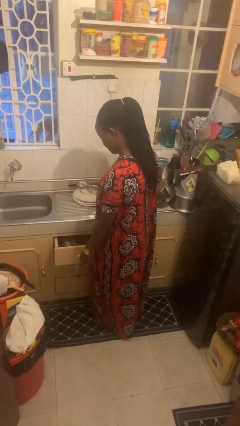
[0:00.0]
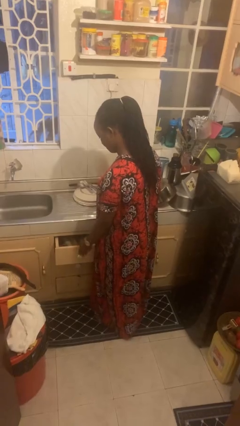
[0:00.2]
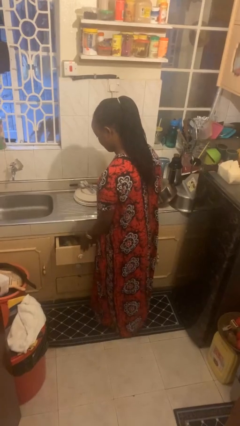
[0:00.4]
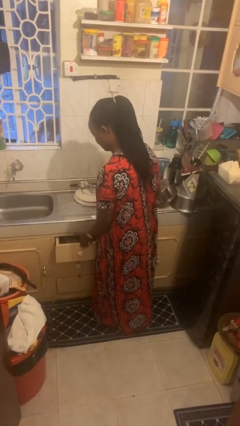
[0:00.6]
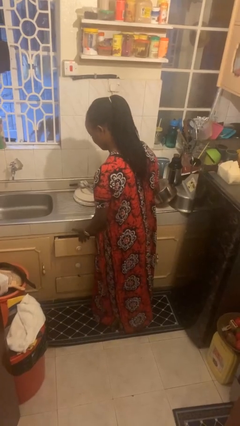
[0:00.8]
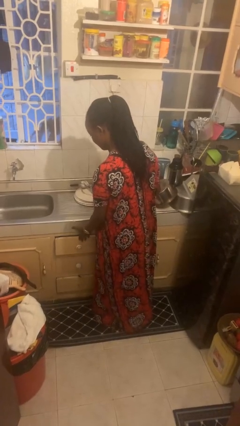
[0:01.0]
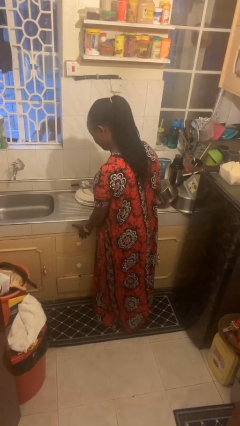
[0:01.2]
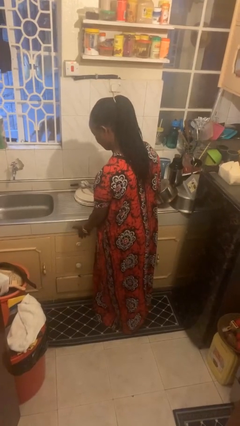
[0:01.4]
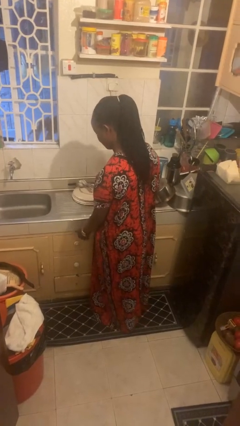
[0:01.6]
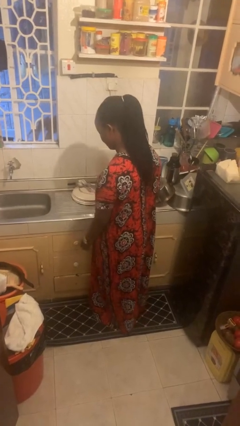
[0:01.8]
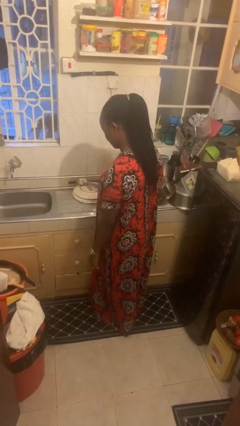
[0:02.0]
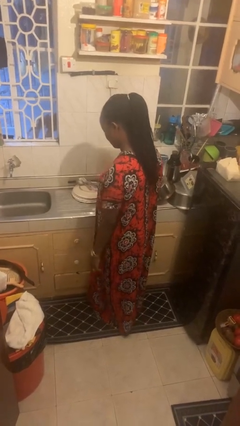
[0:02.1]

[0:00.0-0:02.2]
person closes kitchen drawer

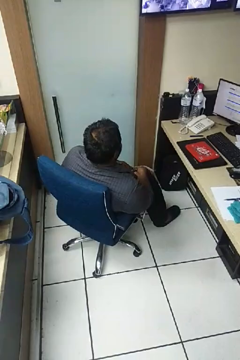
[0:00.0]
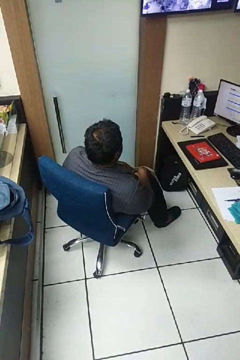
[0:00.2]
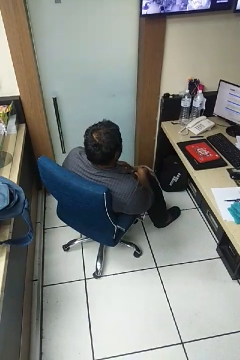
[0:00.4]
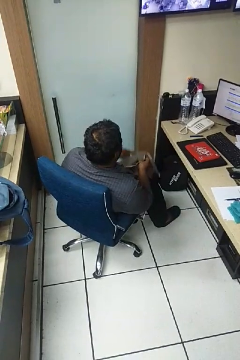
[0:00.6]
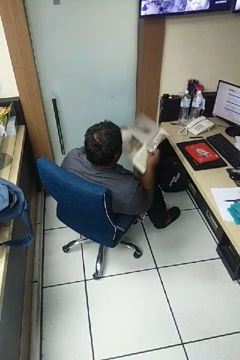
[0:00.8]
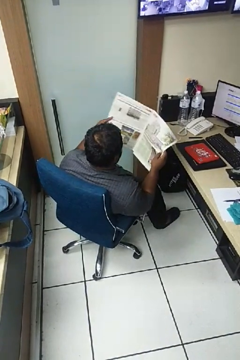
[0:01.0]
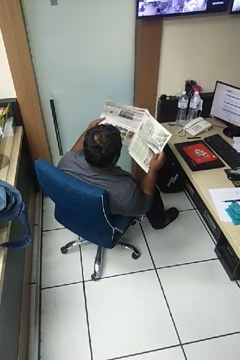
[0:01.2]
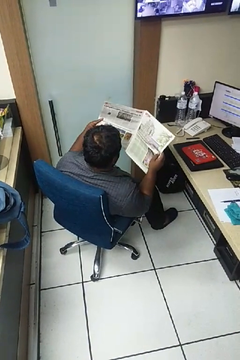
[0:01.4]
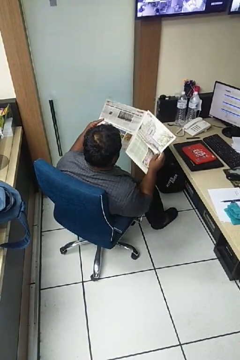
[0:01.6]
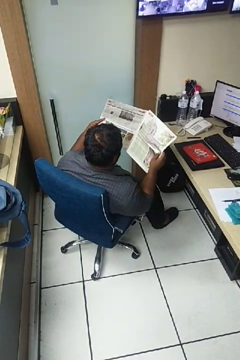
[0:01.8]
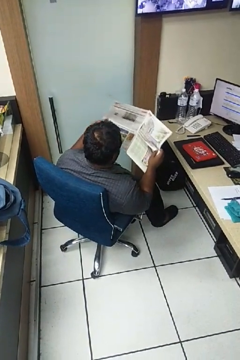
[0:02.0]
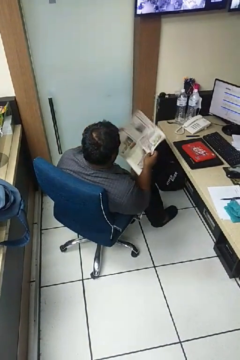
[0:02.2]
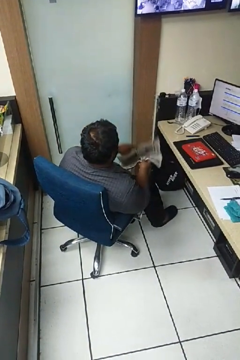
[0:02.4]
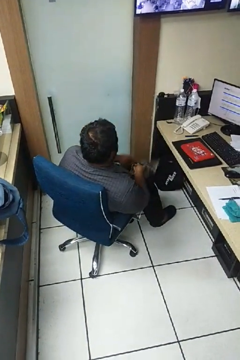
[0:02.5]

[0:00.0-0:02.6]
person reads newspaper

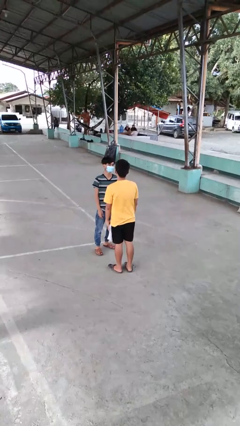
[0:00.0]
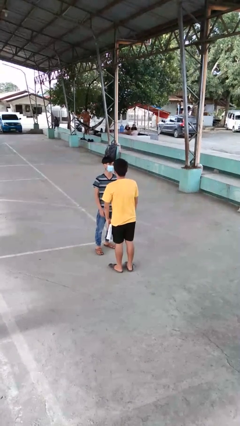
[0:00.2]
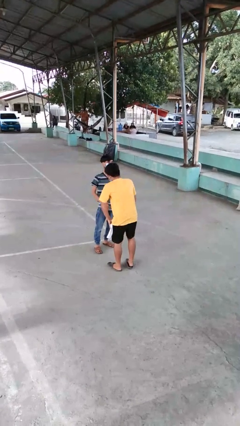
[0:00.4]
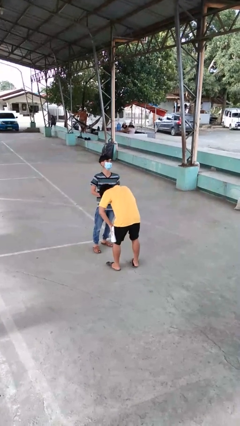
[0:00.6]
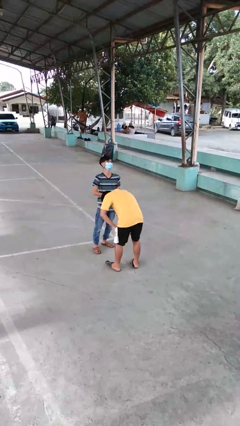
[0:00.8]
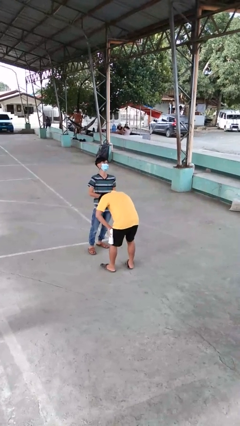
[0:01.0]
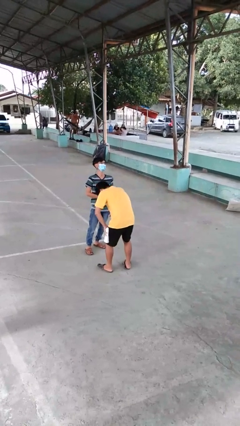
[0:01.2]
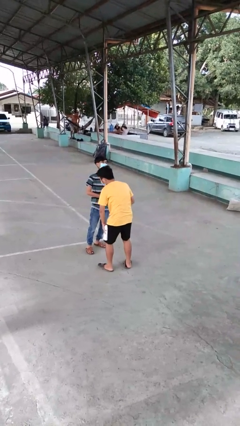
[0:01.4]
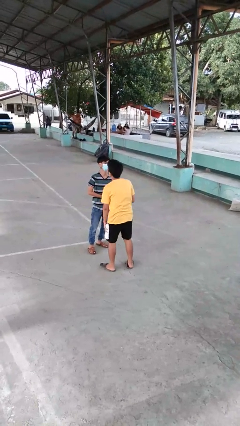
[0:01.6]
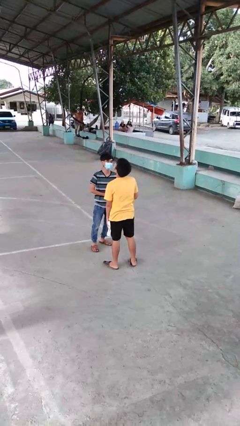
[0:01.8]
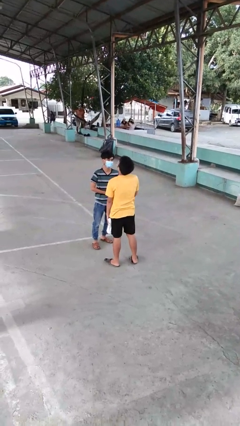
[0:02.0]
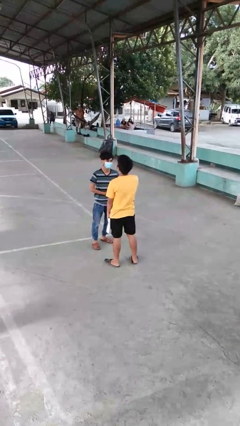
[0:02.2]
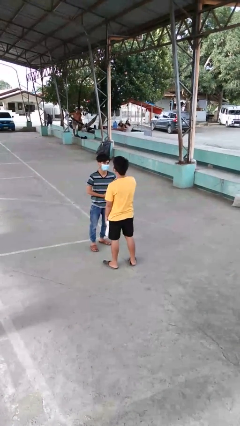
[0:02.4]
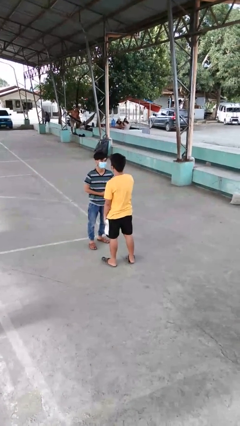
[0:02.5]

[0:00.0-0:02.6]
person laughs with person

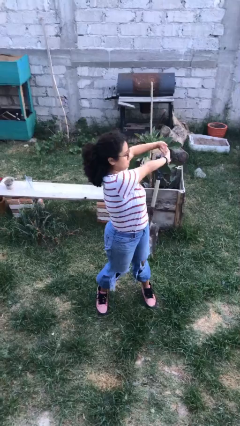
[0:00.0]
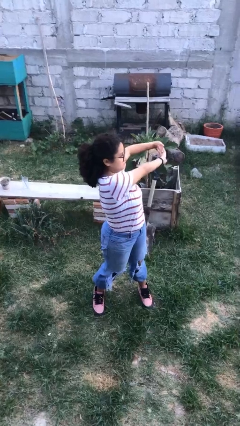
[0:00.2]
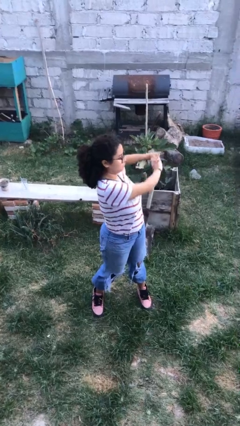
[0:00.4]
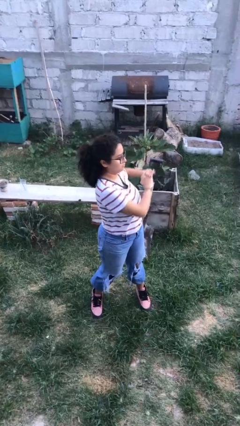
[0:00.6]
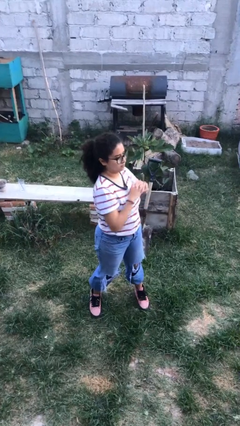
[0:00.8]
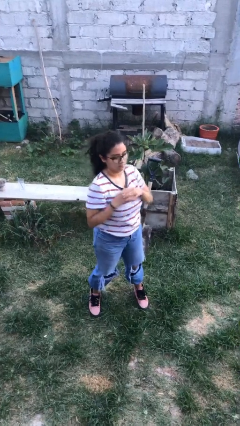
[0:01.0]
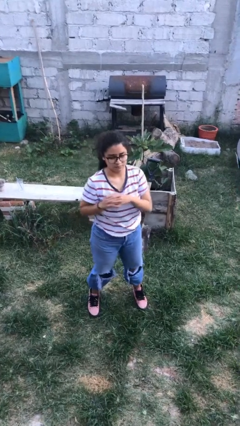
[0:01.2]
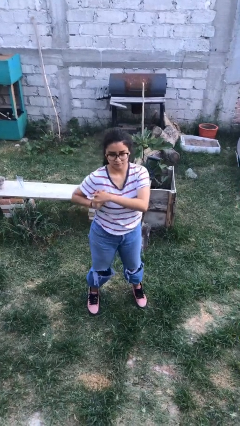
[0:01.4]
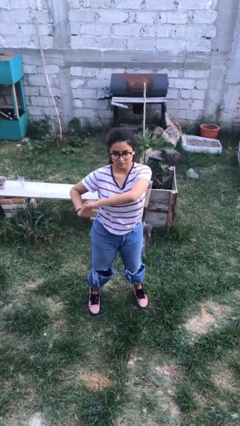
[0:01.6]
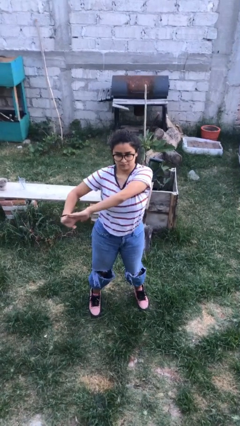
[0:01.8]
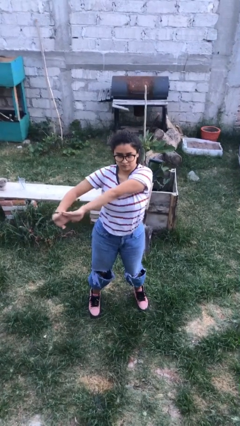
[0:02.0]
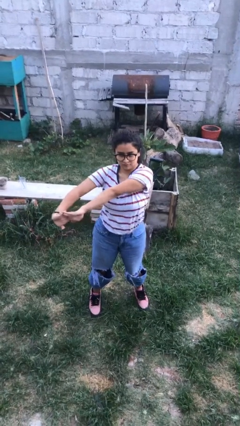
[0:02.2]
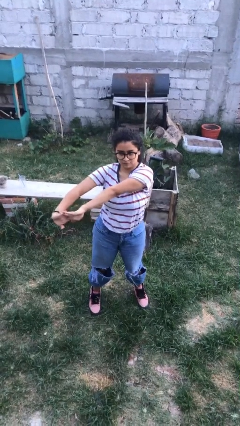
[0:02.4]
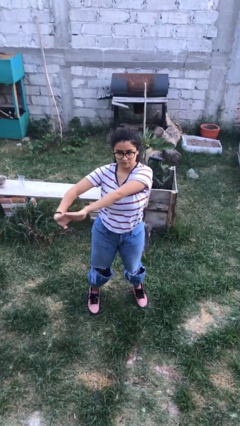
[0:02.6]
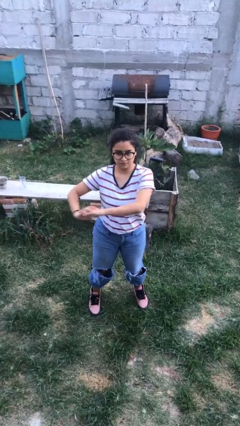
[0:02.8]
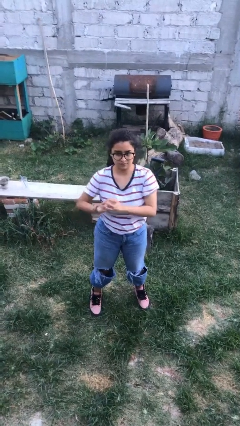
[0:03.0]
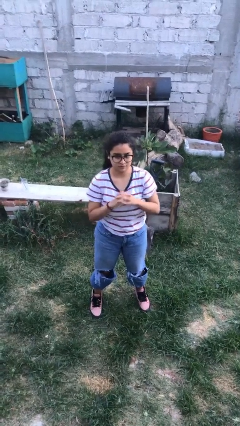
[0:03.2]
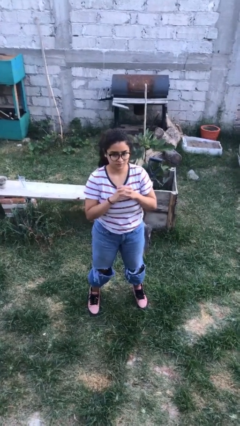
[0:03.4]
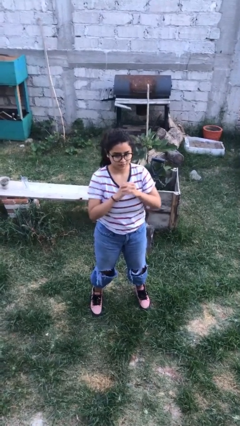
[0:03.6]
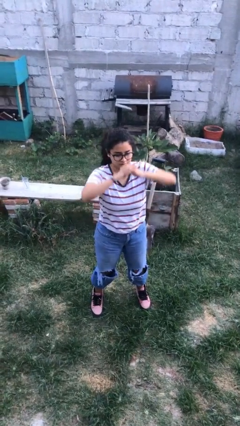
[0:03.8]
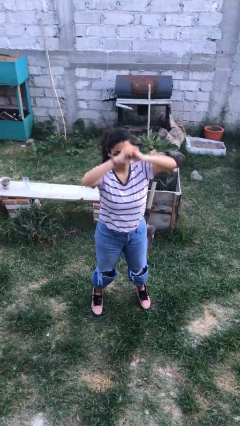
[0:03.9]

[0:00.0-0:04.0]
person stretches arms to side

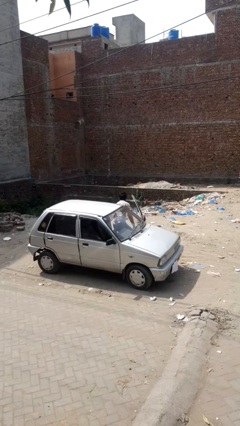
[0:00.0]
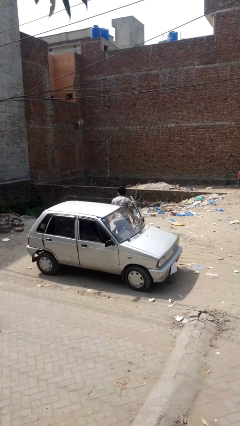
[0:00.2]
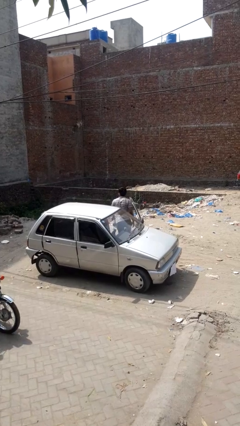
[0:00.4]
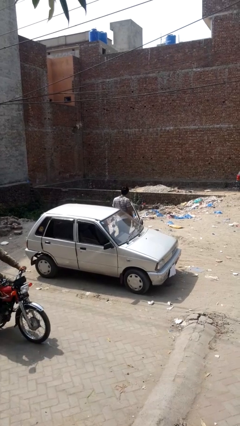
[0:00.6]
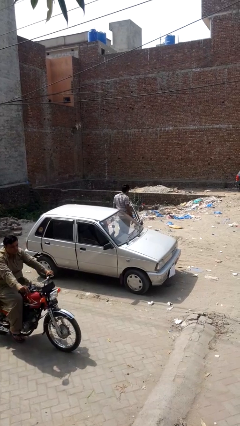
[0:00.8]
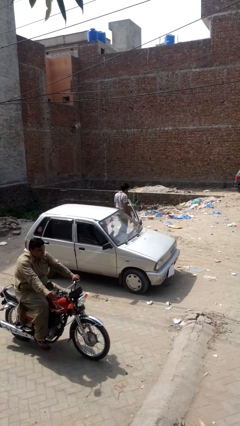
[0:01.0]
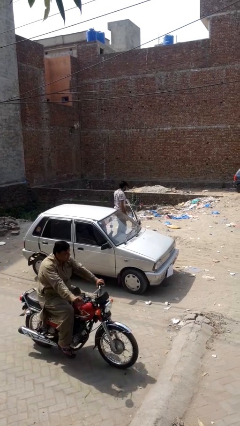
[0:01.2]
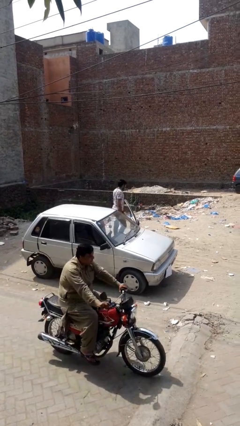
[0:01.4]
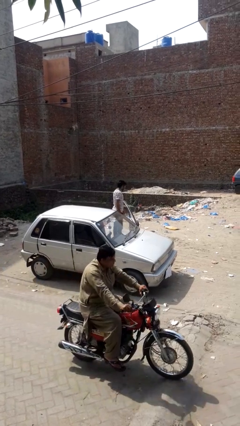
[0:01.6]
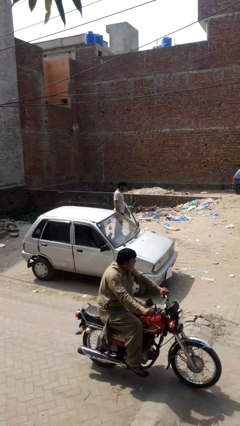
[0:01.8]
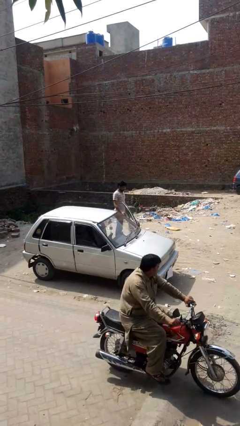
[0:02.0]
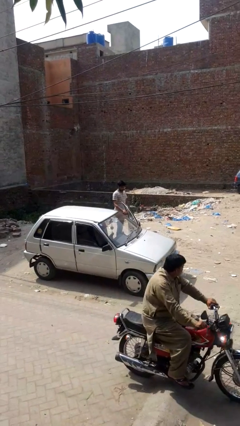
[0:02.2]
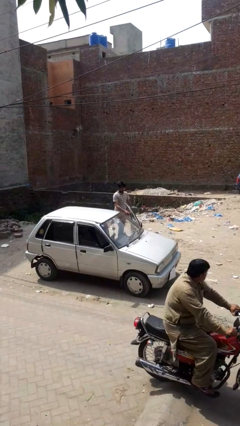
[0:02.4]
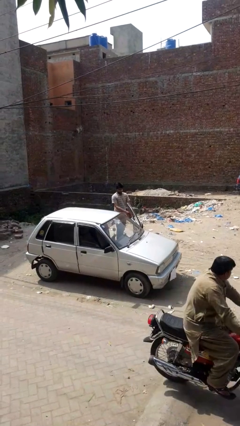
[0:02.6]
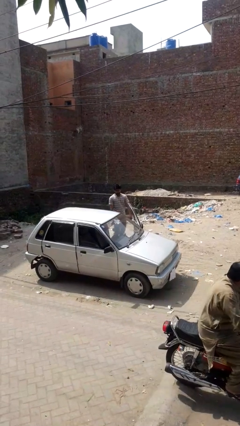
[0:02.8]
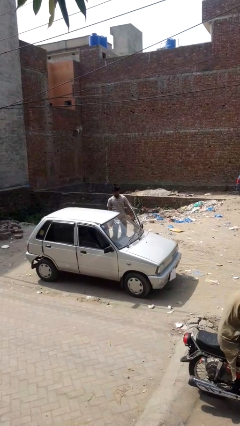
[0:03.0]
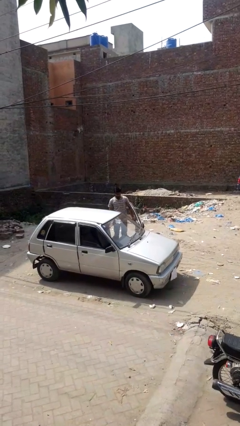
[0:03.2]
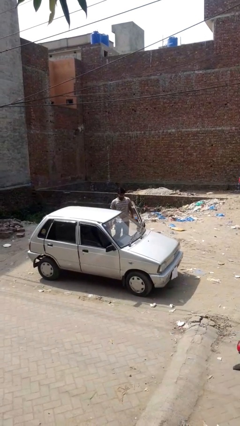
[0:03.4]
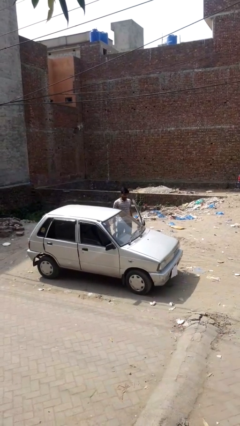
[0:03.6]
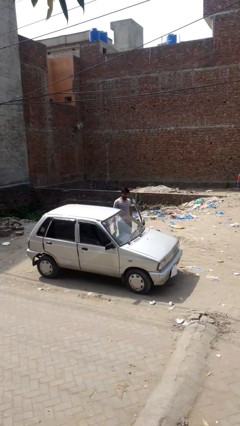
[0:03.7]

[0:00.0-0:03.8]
person exits car

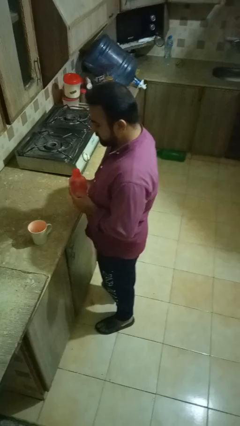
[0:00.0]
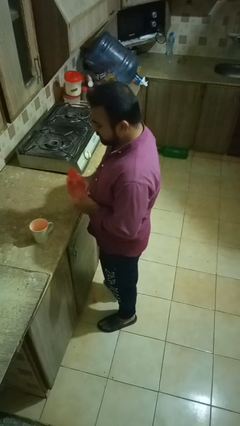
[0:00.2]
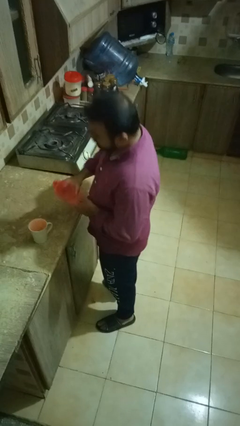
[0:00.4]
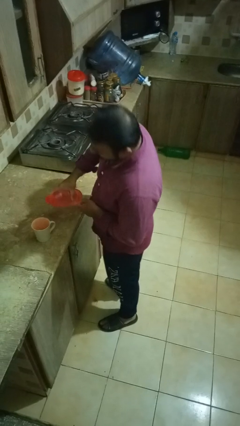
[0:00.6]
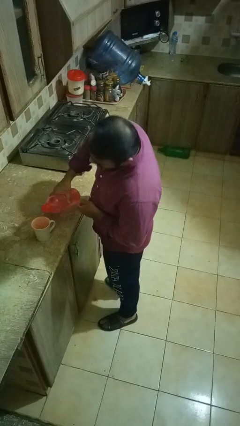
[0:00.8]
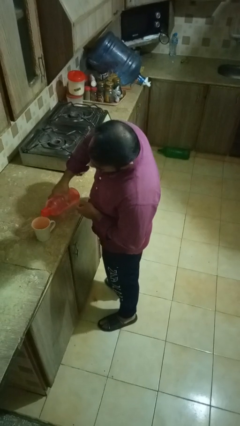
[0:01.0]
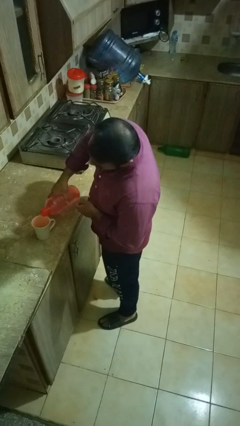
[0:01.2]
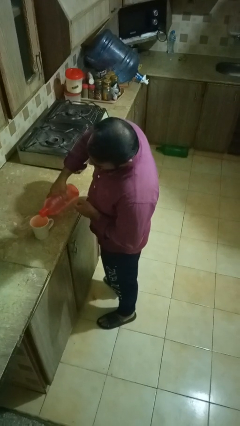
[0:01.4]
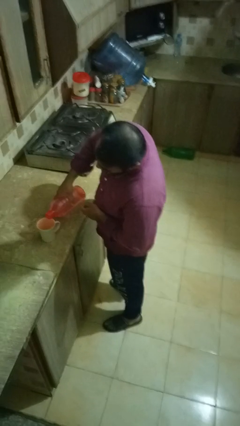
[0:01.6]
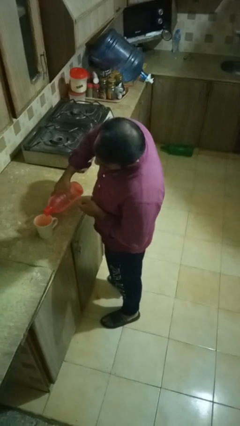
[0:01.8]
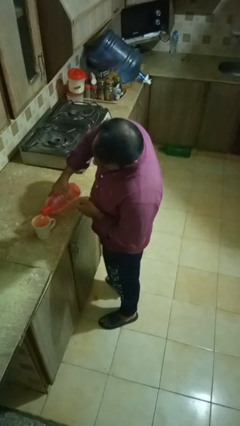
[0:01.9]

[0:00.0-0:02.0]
person pours liquid into cup

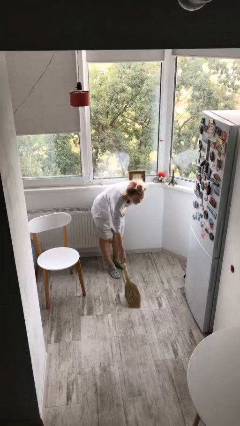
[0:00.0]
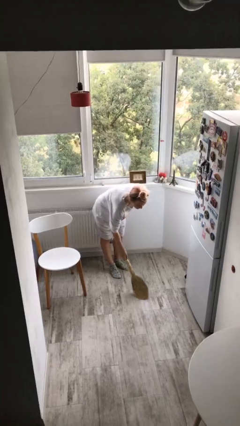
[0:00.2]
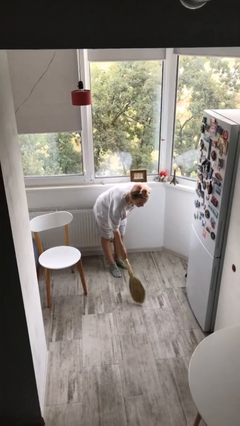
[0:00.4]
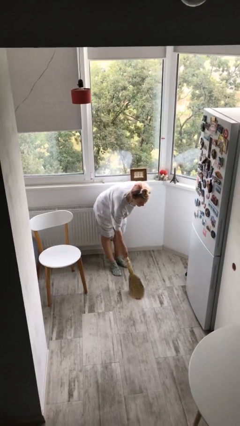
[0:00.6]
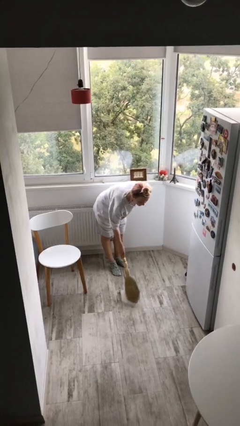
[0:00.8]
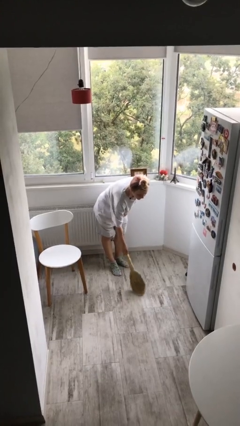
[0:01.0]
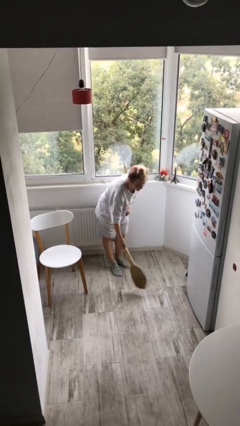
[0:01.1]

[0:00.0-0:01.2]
person sweeps floor
